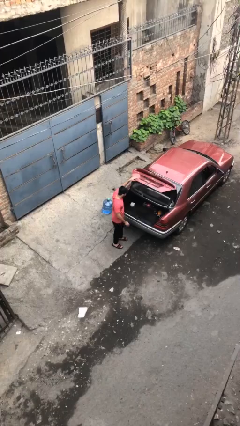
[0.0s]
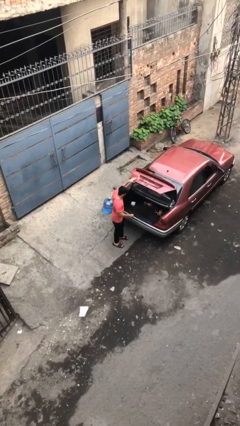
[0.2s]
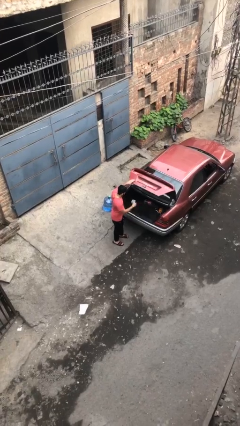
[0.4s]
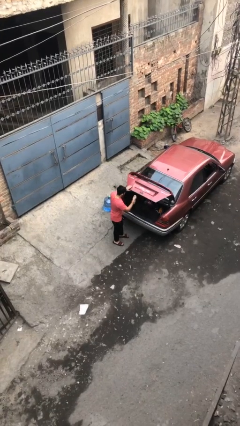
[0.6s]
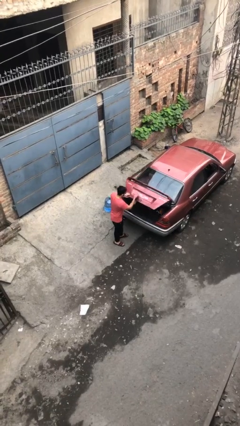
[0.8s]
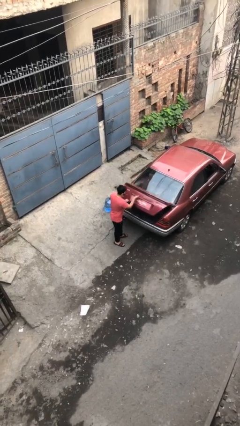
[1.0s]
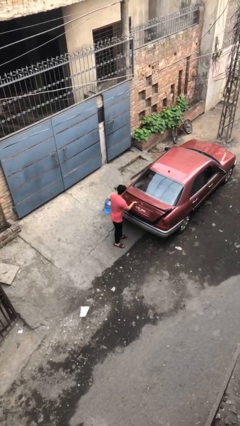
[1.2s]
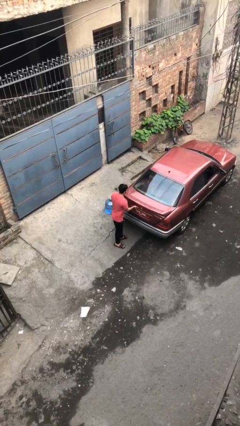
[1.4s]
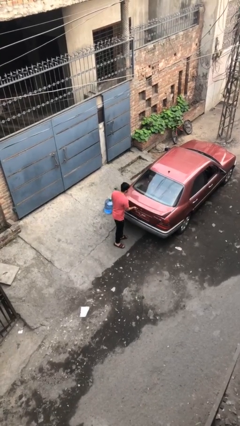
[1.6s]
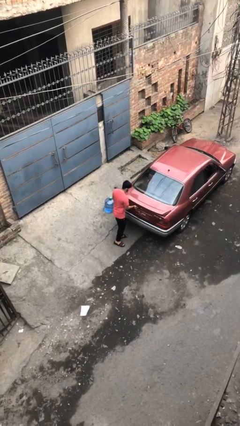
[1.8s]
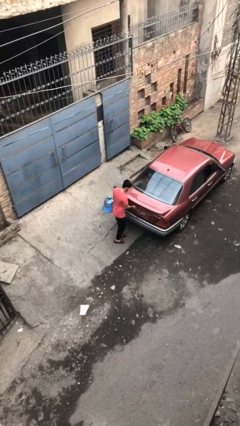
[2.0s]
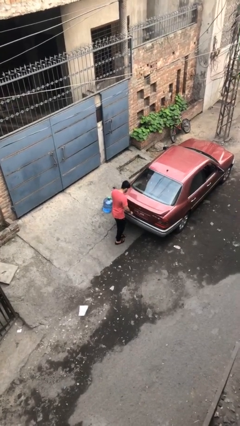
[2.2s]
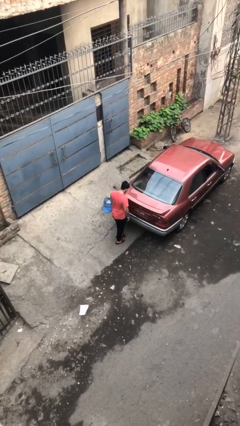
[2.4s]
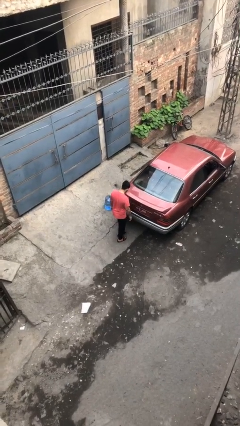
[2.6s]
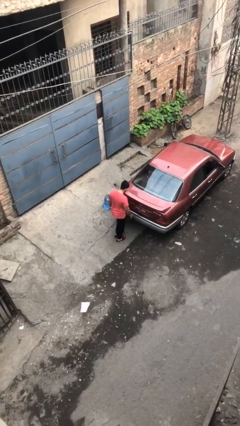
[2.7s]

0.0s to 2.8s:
person closes car trunk

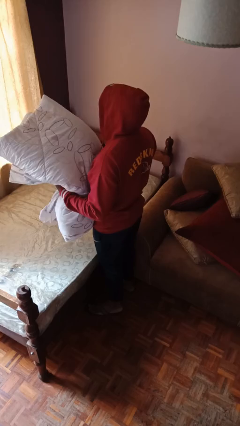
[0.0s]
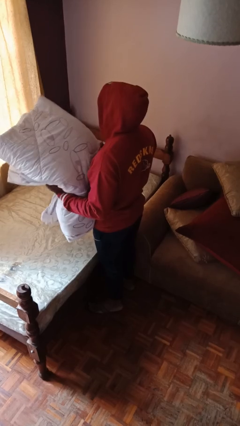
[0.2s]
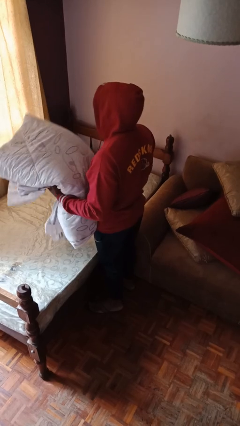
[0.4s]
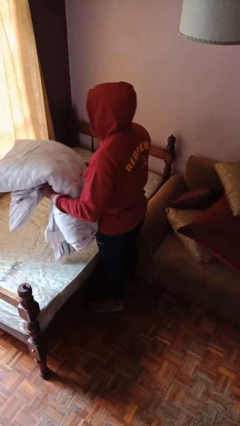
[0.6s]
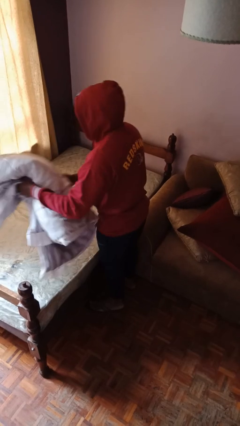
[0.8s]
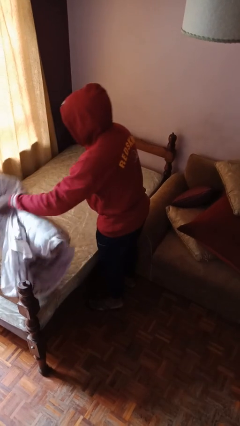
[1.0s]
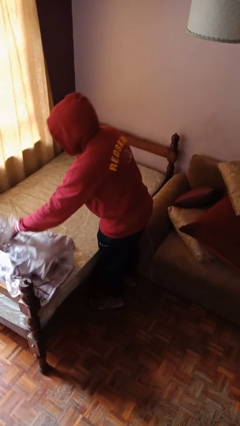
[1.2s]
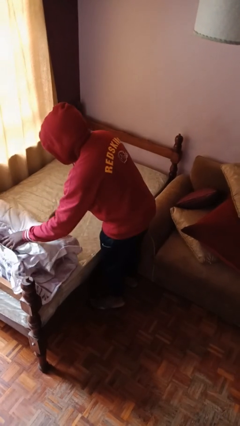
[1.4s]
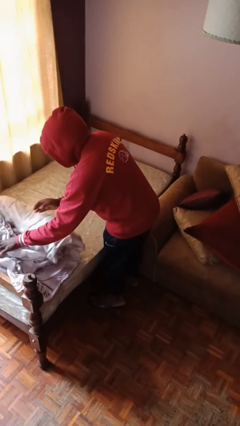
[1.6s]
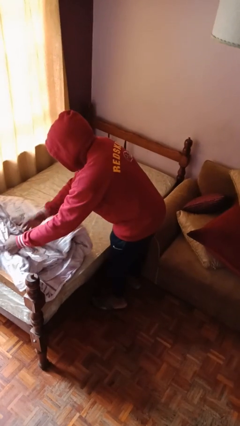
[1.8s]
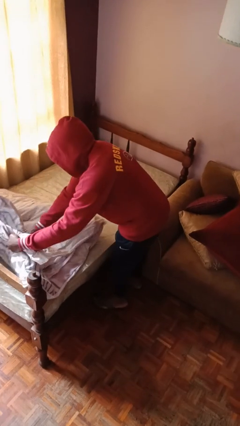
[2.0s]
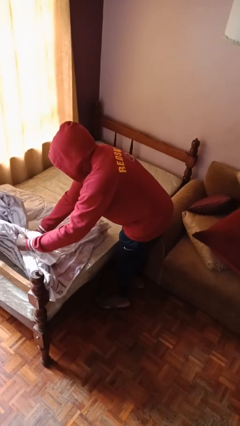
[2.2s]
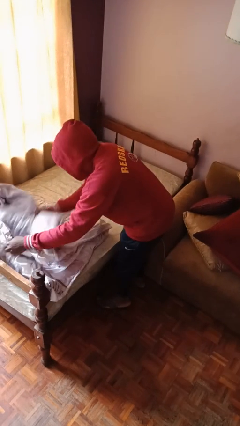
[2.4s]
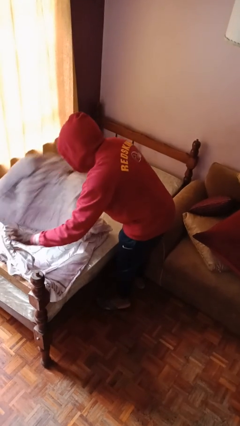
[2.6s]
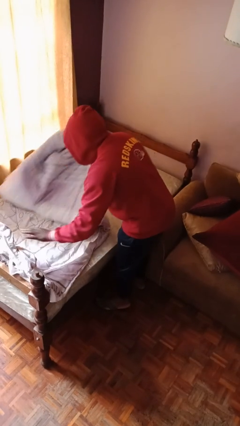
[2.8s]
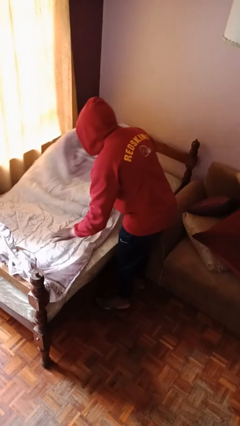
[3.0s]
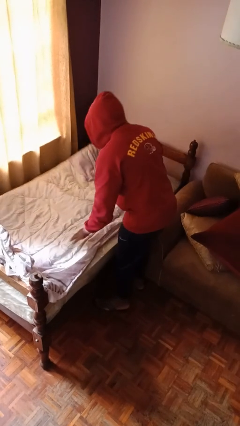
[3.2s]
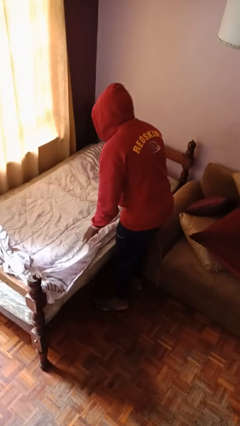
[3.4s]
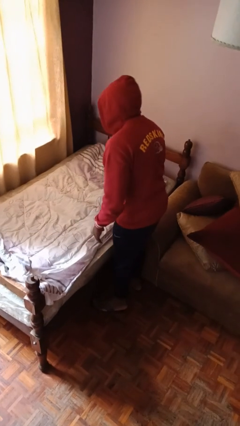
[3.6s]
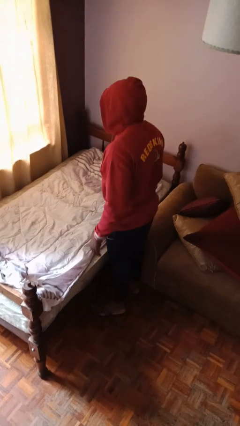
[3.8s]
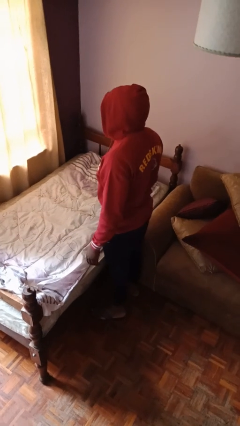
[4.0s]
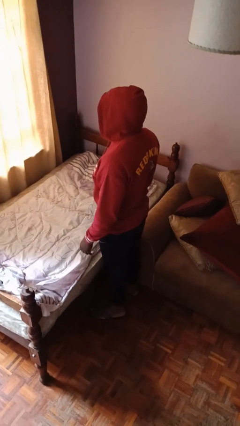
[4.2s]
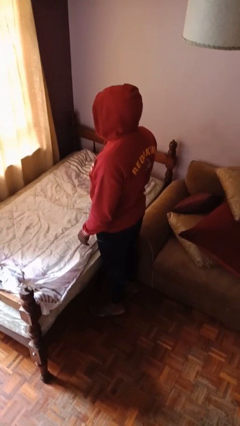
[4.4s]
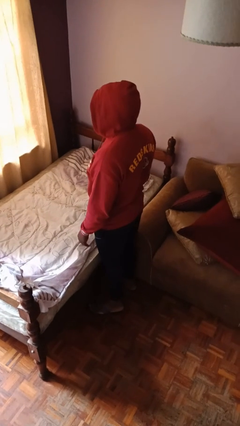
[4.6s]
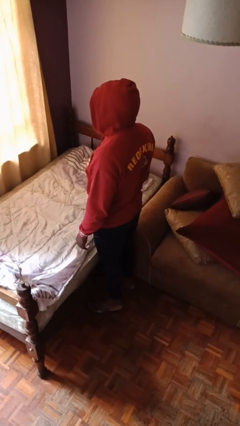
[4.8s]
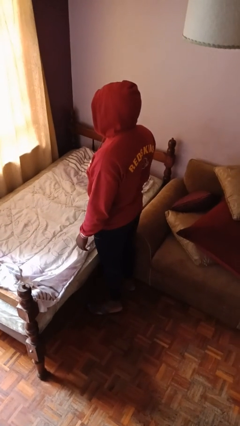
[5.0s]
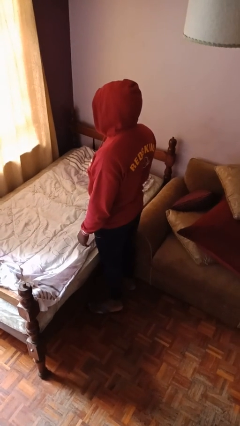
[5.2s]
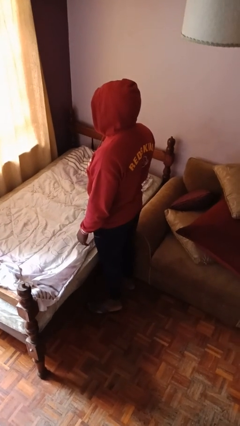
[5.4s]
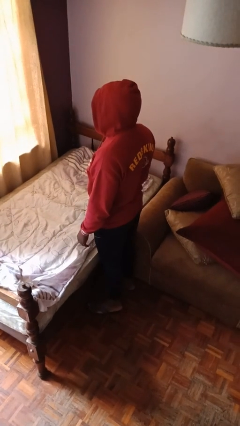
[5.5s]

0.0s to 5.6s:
person unfolds blanket

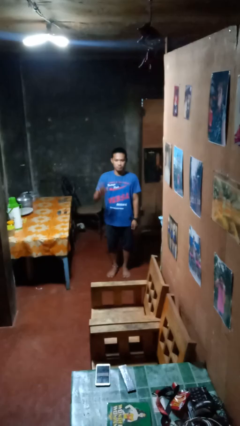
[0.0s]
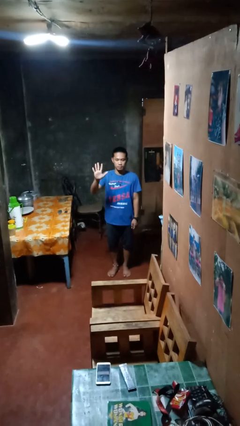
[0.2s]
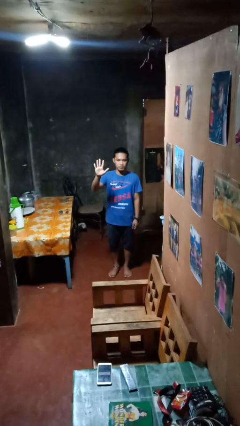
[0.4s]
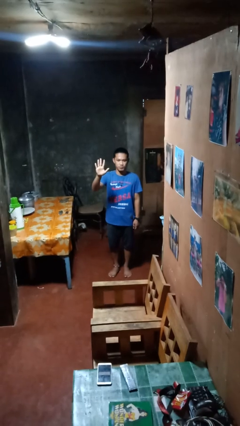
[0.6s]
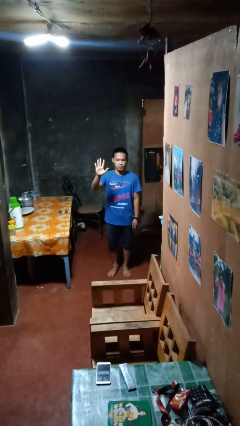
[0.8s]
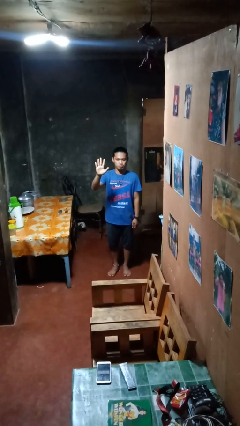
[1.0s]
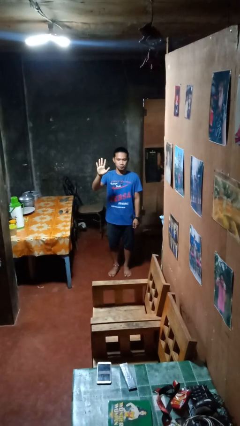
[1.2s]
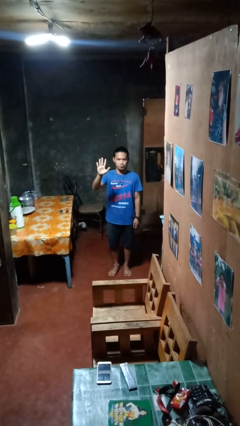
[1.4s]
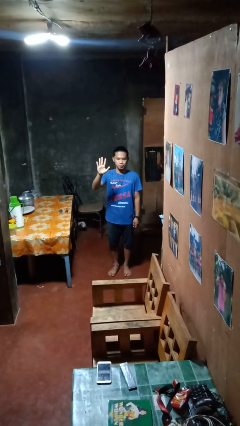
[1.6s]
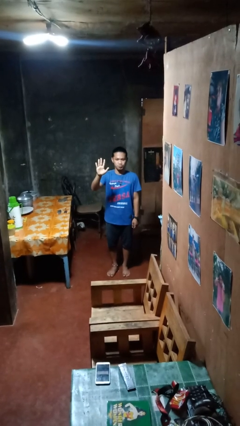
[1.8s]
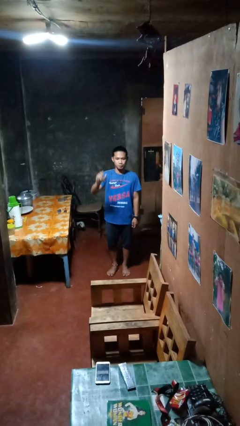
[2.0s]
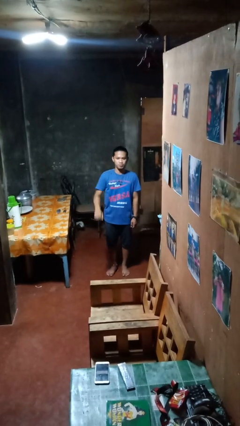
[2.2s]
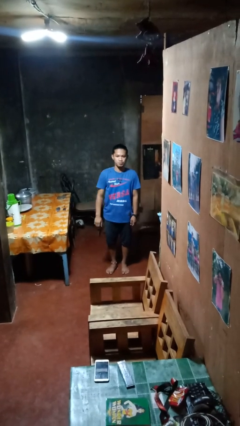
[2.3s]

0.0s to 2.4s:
person gestures number five

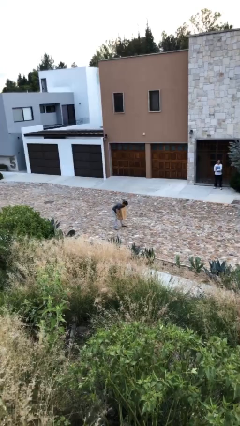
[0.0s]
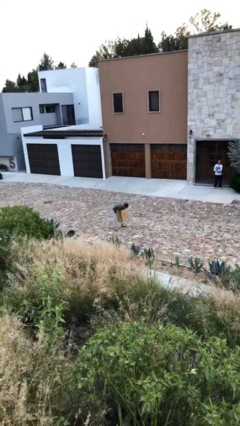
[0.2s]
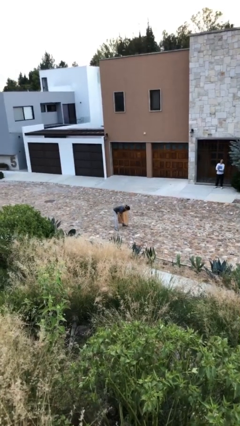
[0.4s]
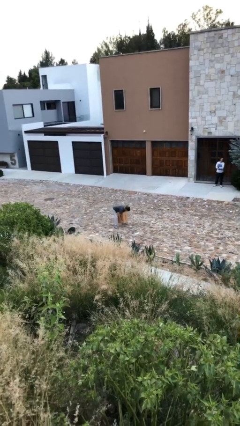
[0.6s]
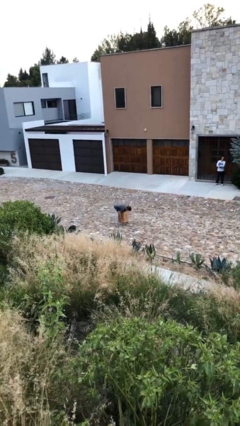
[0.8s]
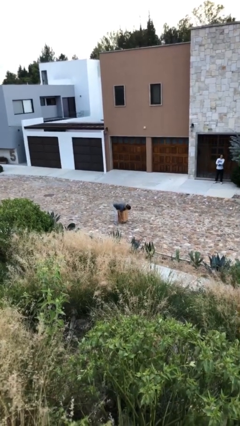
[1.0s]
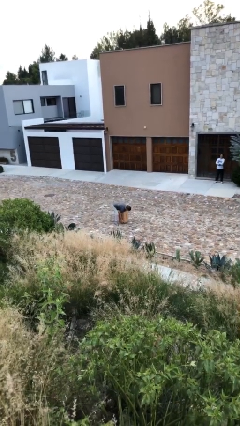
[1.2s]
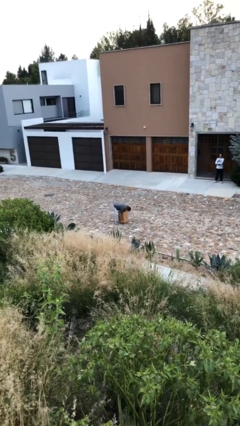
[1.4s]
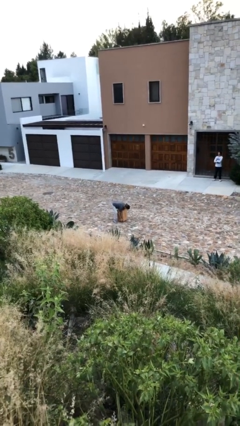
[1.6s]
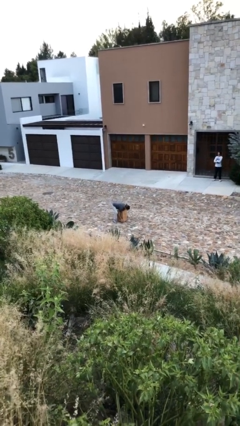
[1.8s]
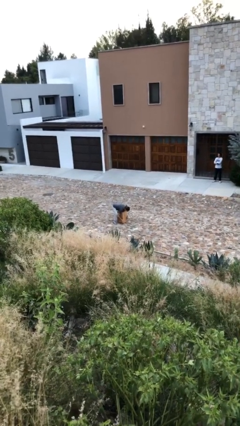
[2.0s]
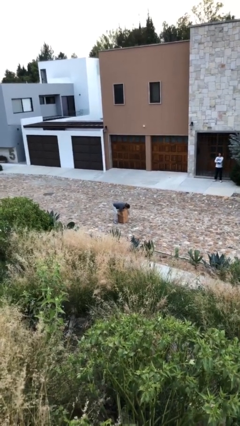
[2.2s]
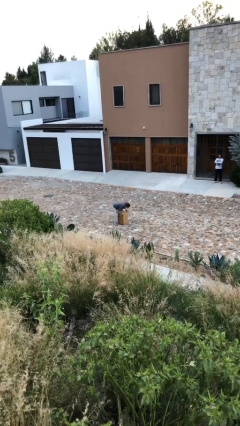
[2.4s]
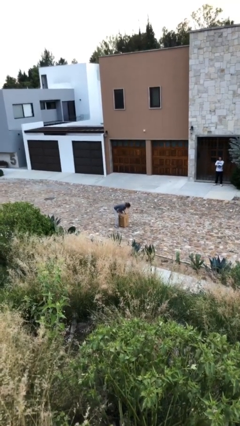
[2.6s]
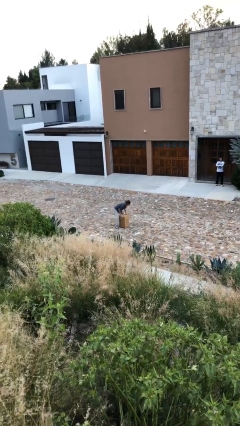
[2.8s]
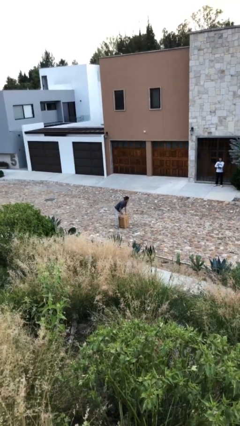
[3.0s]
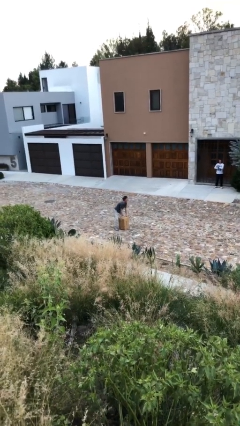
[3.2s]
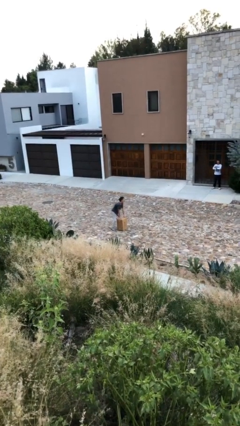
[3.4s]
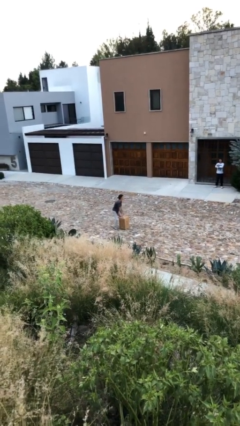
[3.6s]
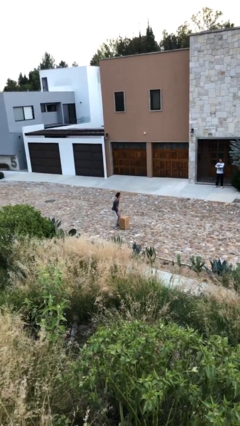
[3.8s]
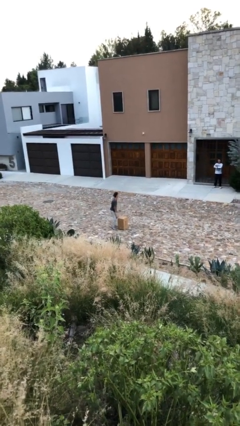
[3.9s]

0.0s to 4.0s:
person puts down object on floor

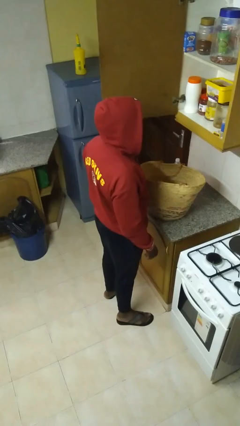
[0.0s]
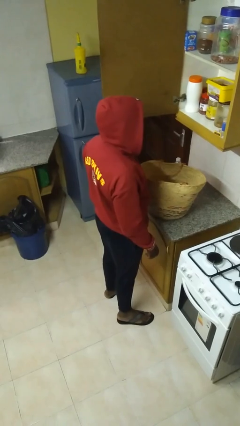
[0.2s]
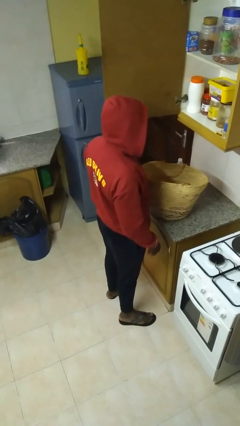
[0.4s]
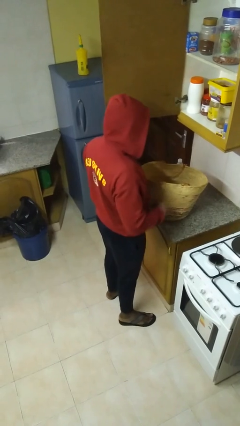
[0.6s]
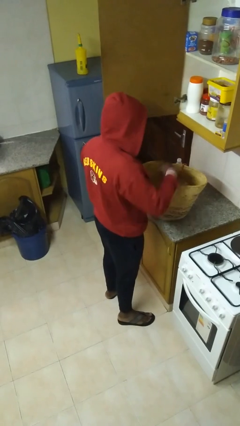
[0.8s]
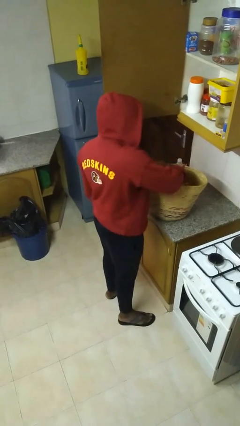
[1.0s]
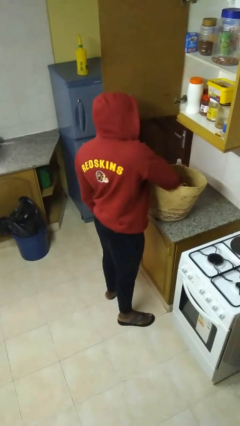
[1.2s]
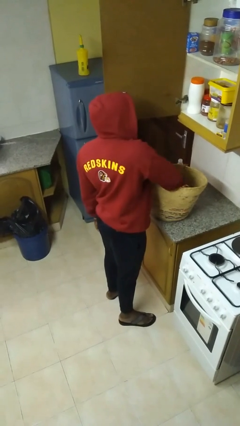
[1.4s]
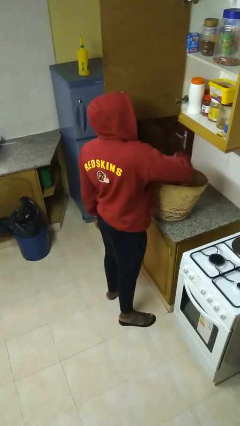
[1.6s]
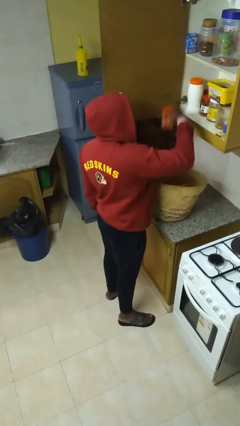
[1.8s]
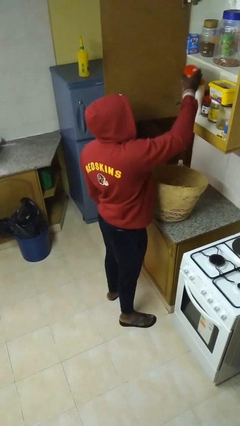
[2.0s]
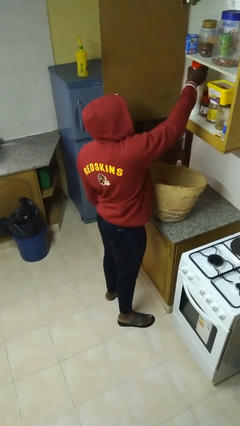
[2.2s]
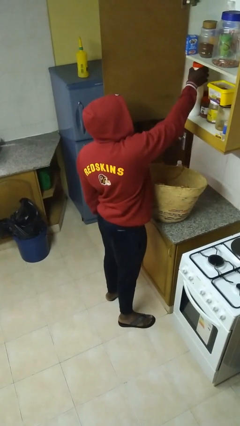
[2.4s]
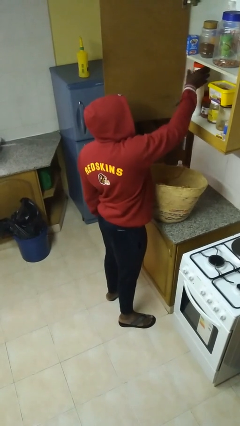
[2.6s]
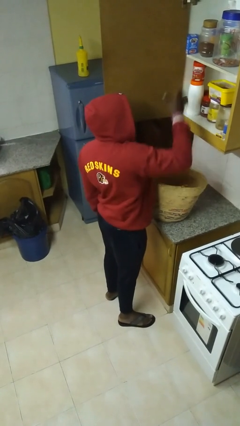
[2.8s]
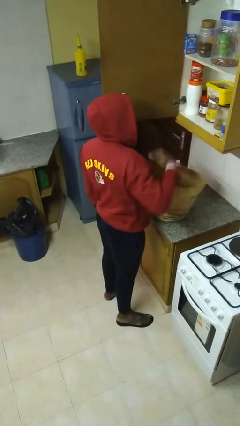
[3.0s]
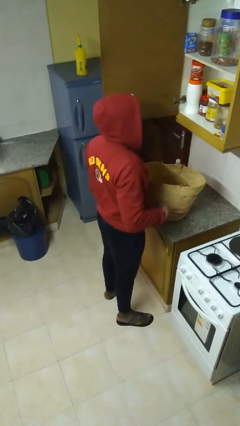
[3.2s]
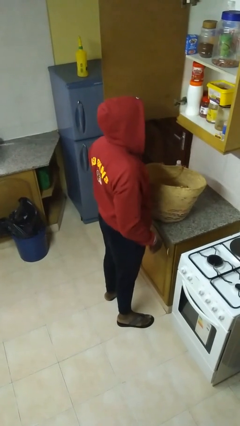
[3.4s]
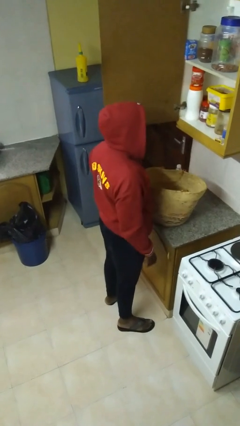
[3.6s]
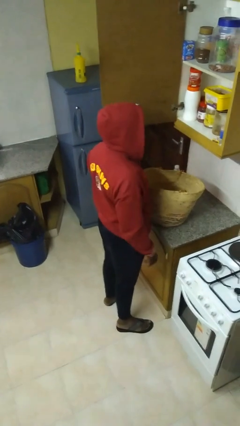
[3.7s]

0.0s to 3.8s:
person loads groceries into cabinet
